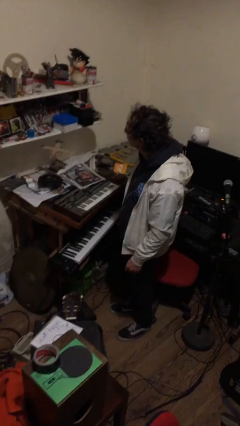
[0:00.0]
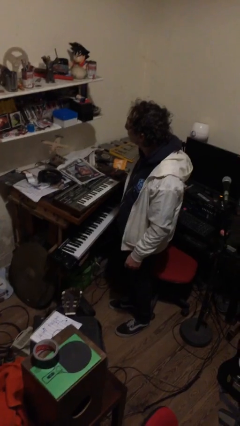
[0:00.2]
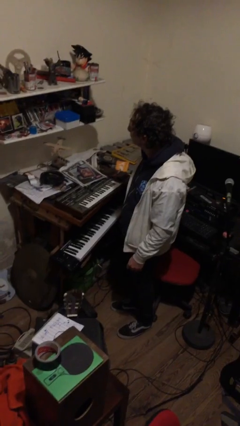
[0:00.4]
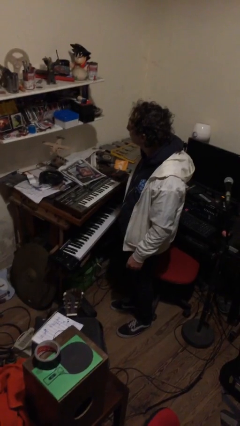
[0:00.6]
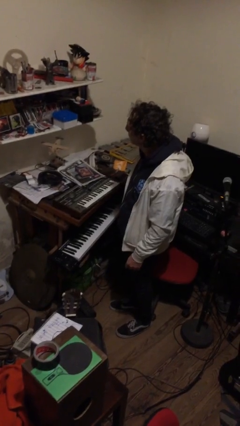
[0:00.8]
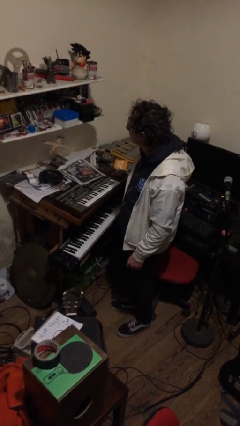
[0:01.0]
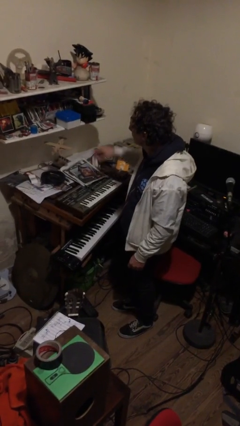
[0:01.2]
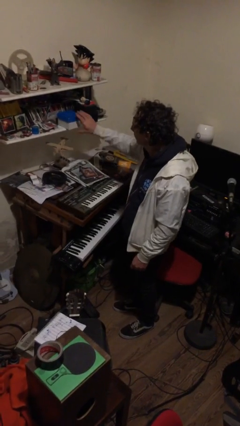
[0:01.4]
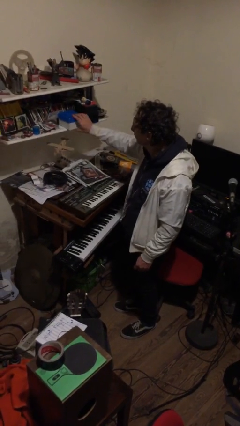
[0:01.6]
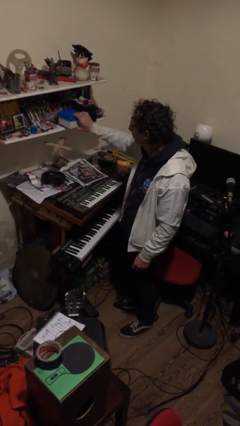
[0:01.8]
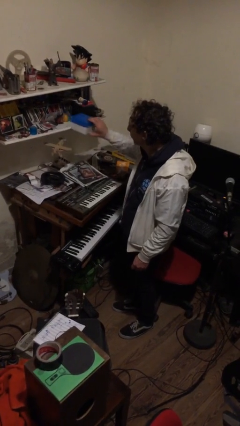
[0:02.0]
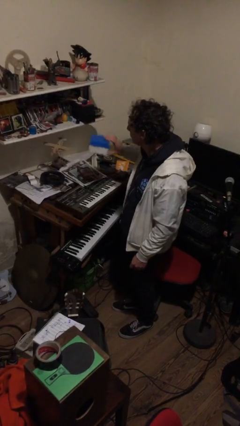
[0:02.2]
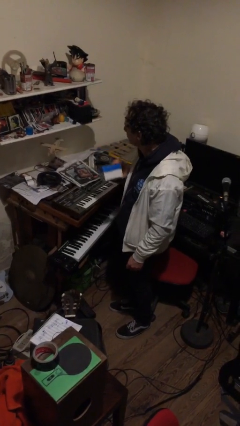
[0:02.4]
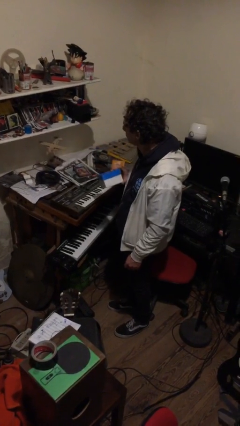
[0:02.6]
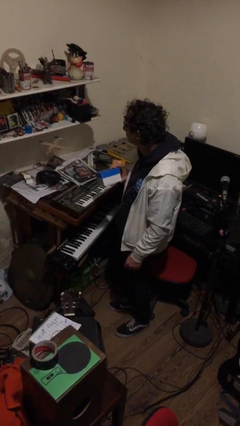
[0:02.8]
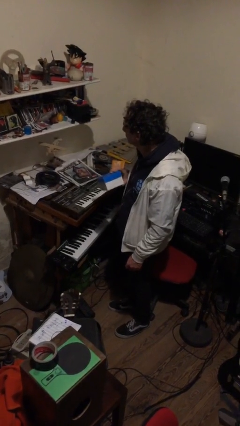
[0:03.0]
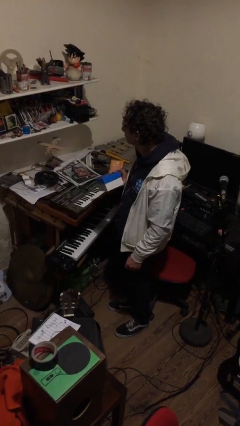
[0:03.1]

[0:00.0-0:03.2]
person picks up object from countertop

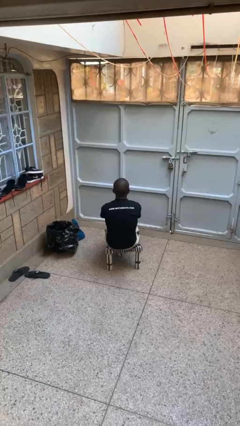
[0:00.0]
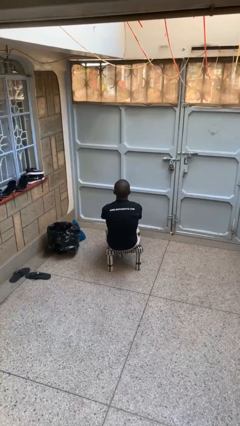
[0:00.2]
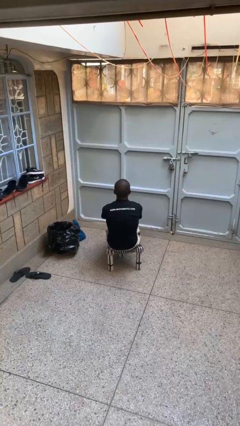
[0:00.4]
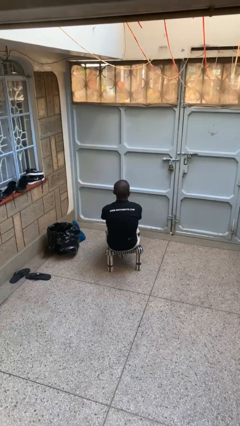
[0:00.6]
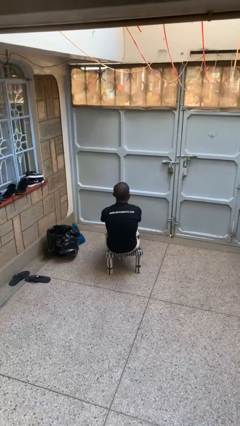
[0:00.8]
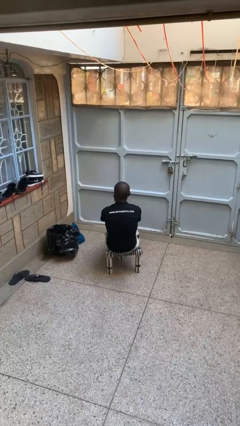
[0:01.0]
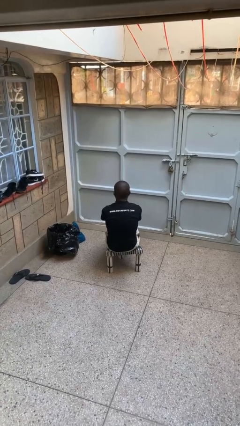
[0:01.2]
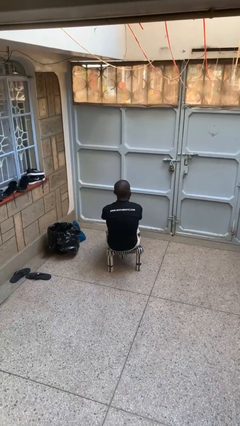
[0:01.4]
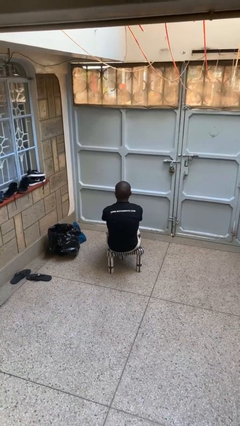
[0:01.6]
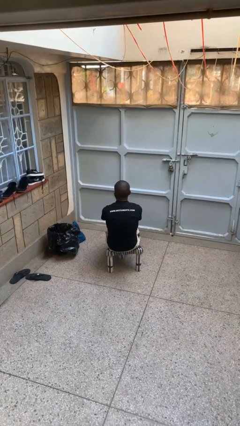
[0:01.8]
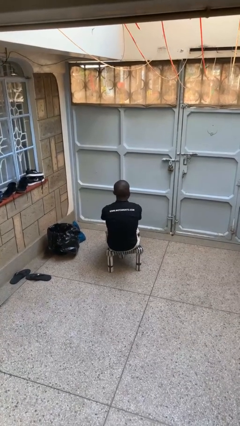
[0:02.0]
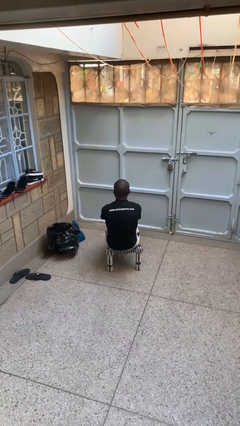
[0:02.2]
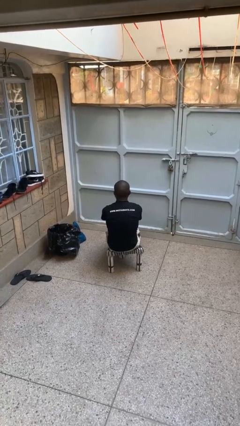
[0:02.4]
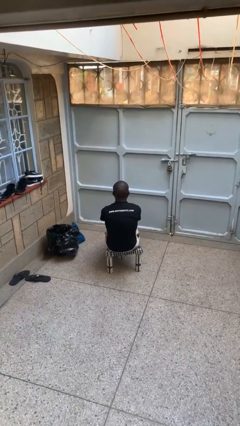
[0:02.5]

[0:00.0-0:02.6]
person shakes head

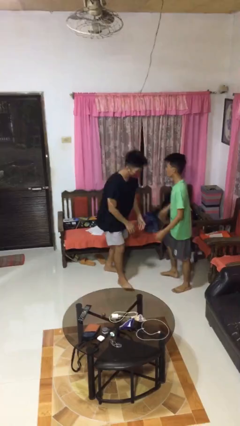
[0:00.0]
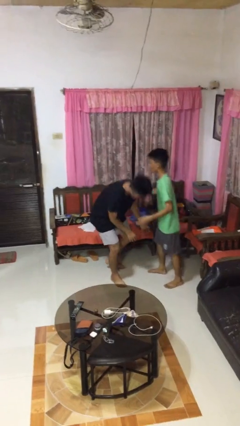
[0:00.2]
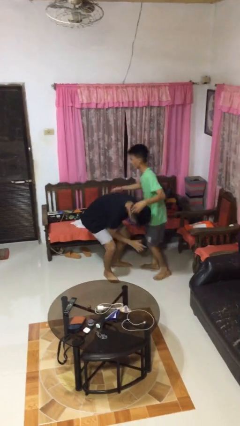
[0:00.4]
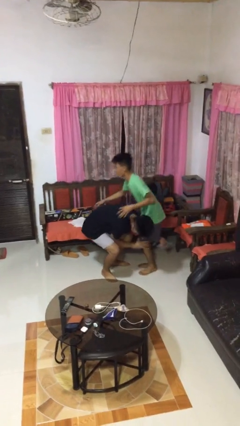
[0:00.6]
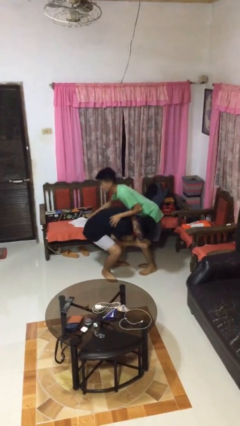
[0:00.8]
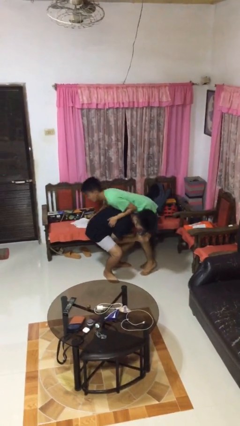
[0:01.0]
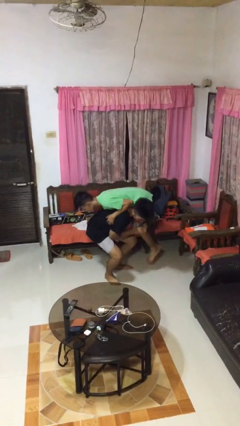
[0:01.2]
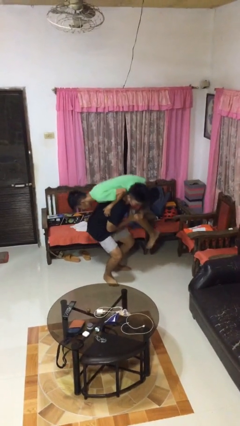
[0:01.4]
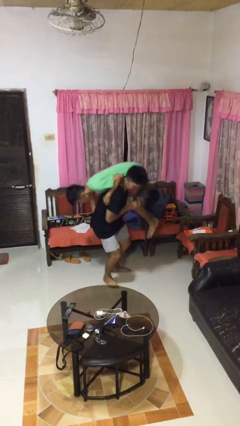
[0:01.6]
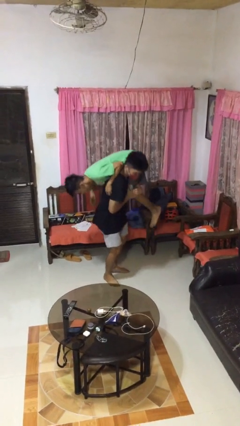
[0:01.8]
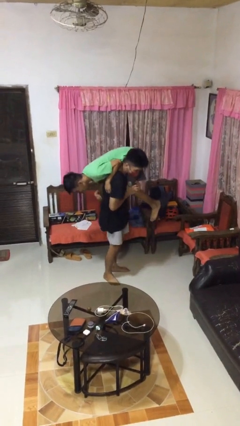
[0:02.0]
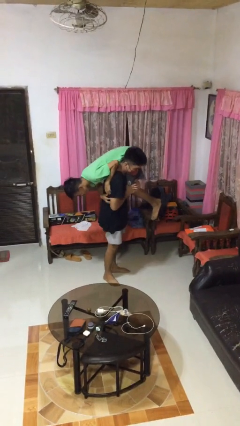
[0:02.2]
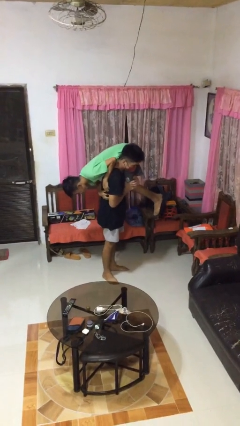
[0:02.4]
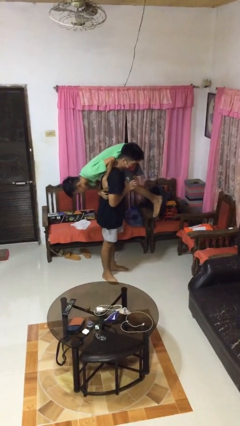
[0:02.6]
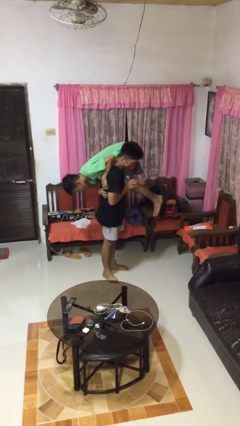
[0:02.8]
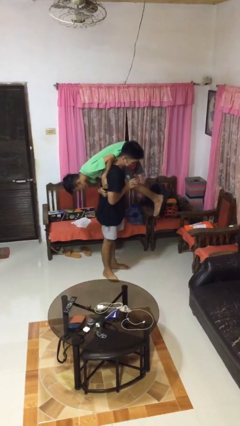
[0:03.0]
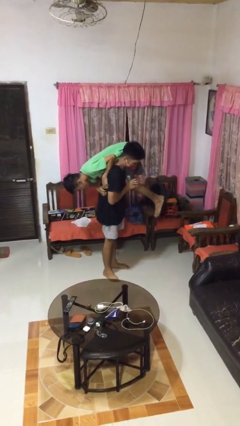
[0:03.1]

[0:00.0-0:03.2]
person carries person over shoulder

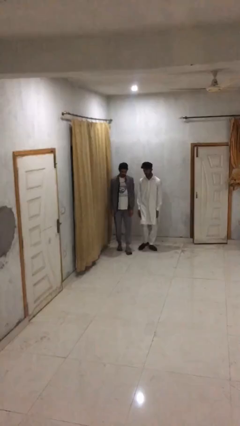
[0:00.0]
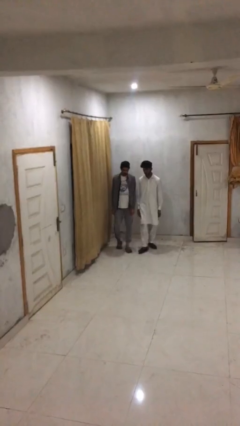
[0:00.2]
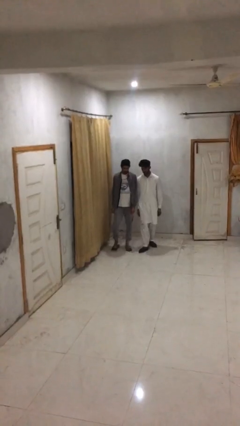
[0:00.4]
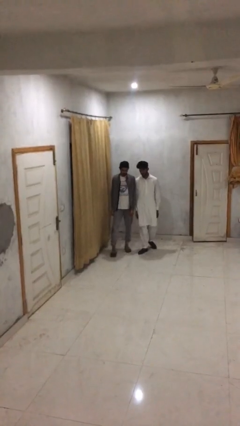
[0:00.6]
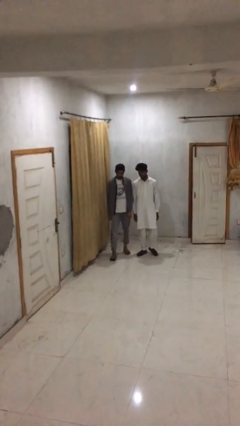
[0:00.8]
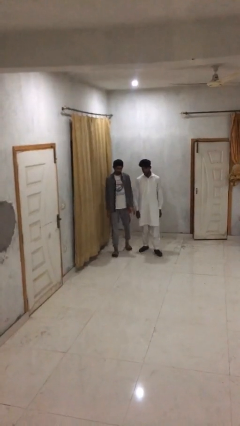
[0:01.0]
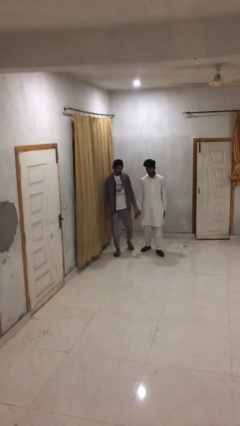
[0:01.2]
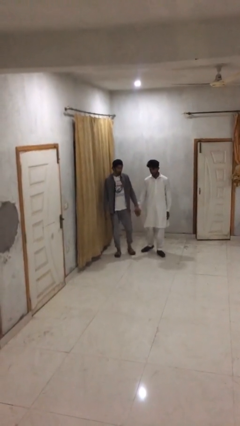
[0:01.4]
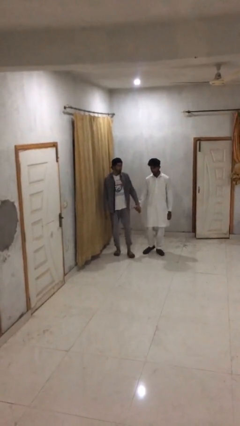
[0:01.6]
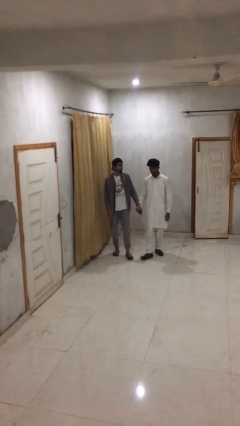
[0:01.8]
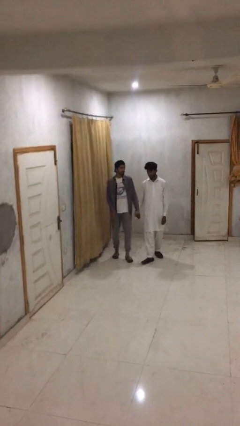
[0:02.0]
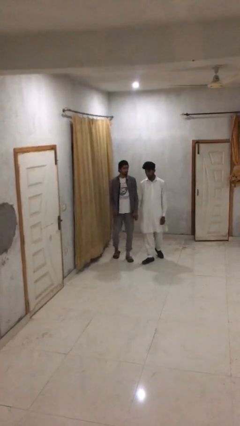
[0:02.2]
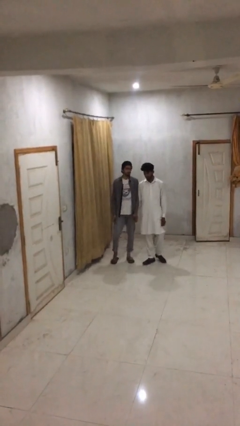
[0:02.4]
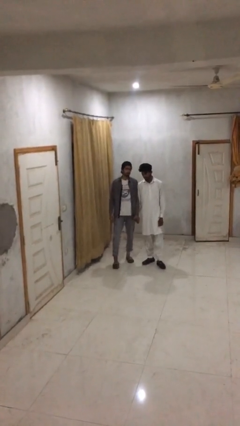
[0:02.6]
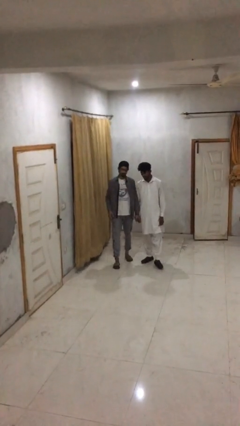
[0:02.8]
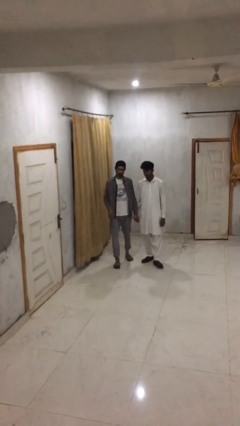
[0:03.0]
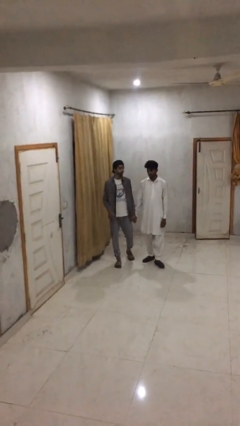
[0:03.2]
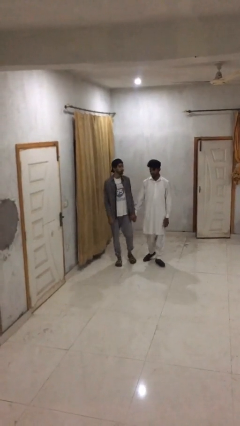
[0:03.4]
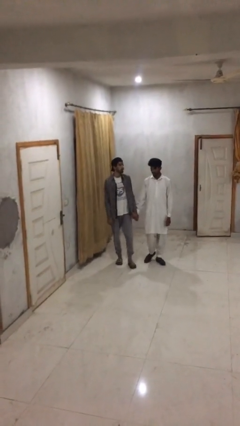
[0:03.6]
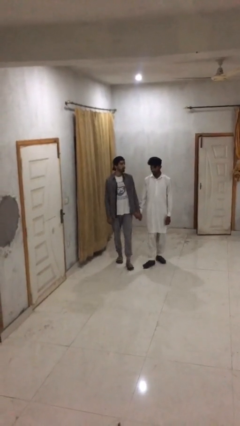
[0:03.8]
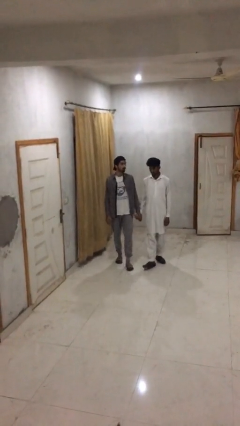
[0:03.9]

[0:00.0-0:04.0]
person holds hand

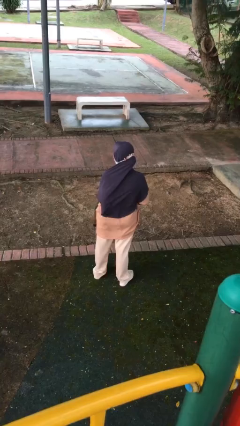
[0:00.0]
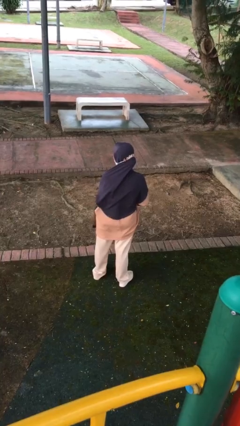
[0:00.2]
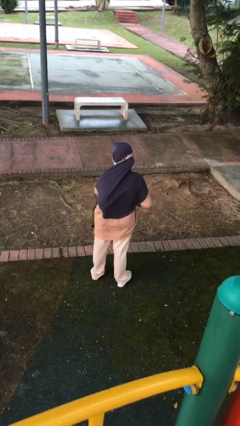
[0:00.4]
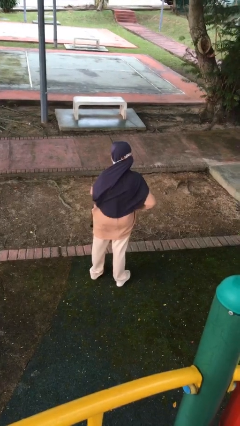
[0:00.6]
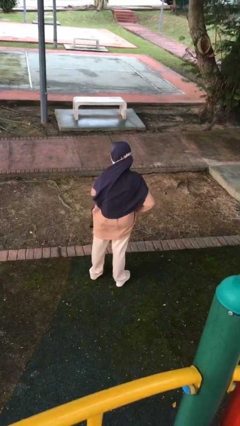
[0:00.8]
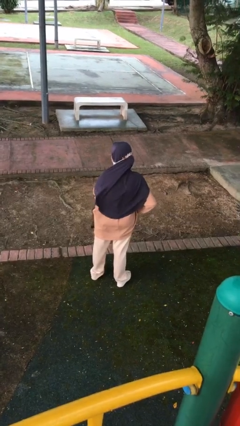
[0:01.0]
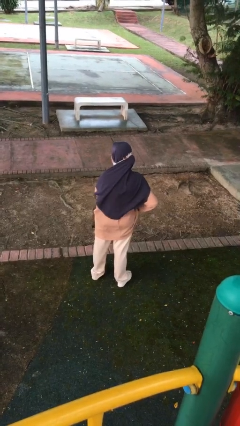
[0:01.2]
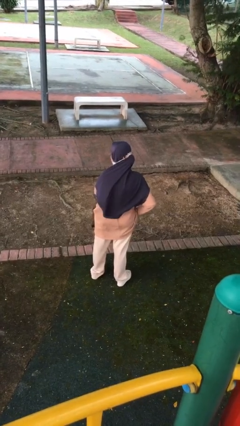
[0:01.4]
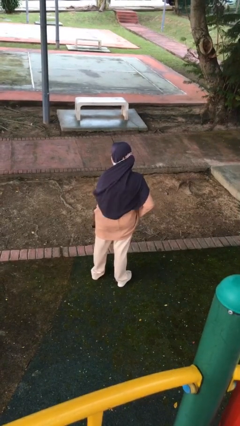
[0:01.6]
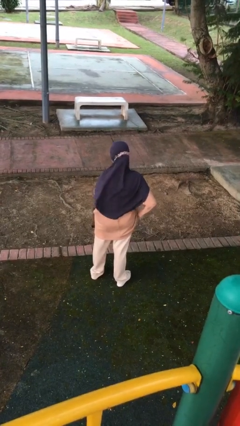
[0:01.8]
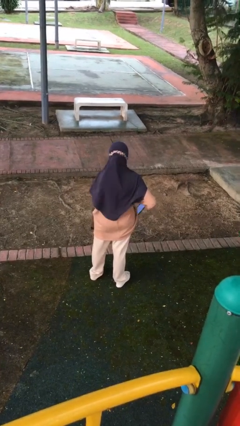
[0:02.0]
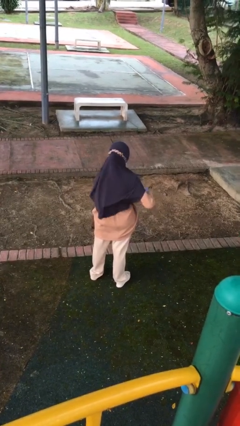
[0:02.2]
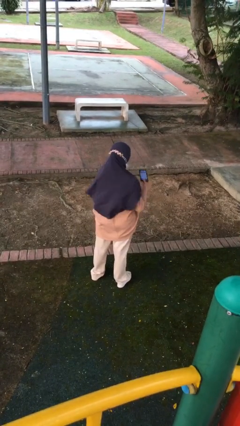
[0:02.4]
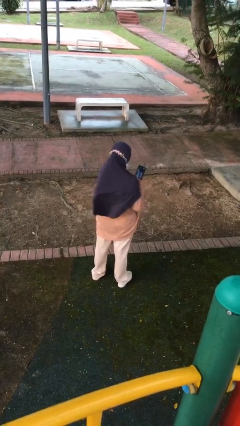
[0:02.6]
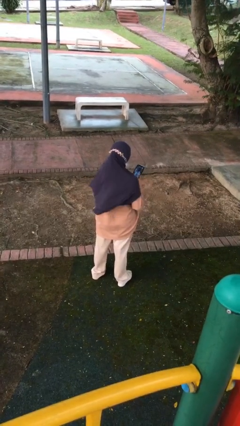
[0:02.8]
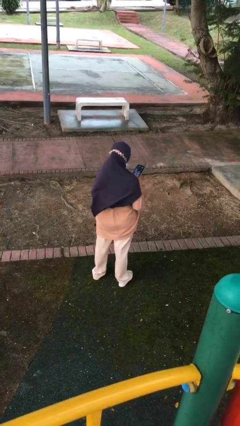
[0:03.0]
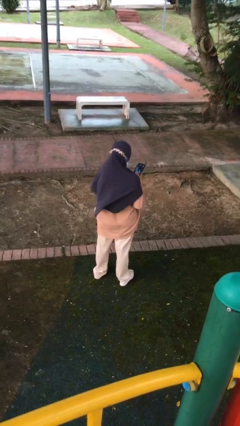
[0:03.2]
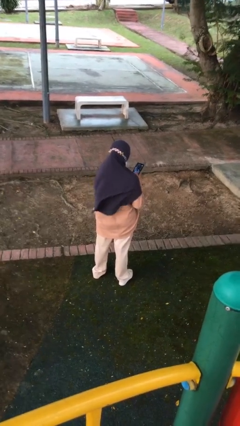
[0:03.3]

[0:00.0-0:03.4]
person takes phone from pocket

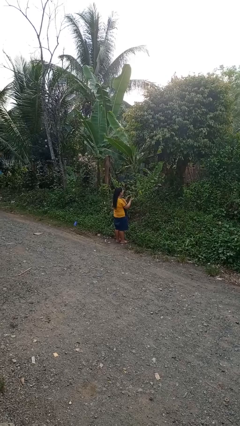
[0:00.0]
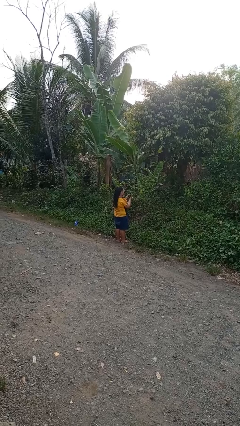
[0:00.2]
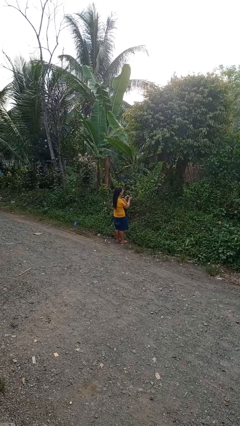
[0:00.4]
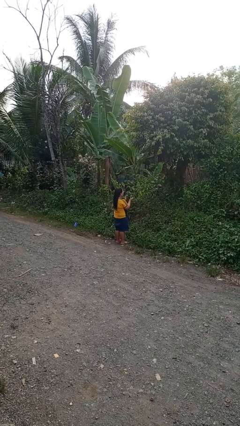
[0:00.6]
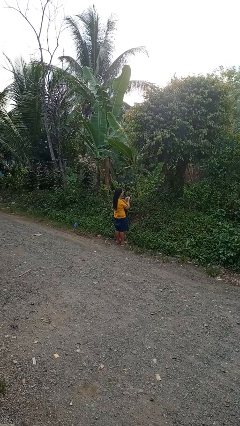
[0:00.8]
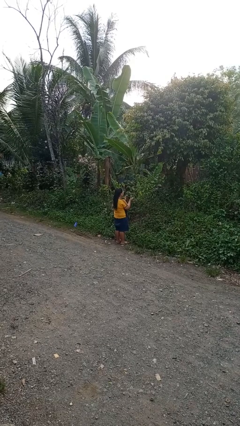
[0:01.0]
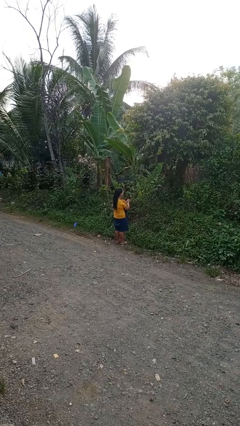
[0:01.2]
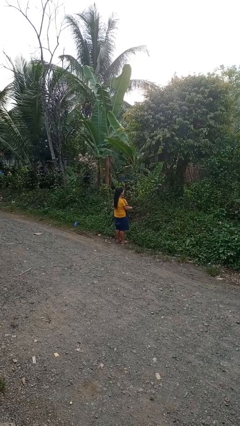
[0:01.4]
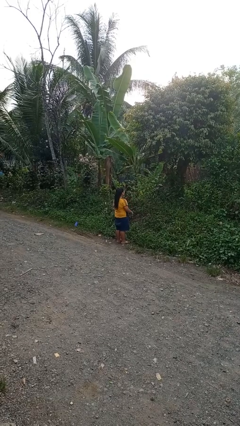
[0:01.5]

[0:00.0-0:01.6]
person claps hands
